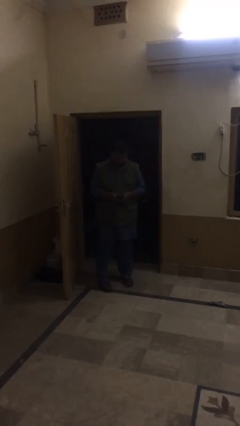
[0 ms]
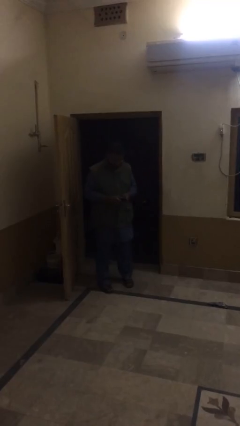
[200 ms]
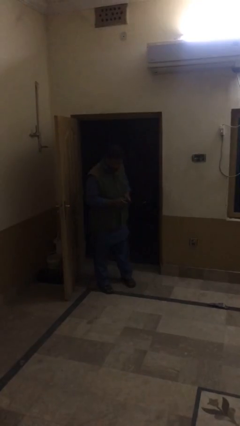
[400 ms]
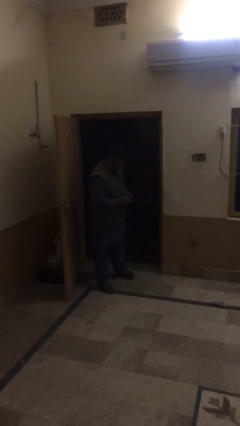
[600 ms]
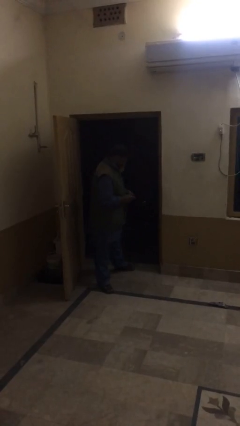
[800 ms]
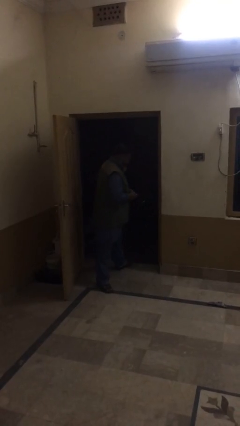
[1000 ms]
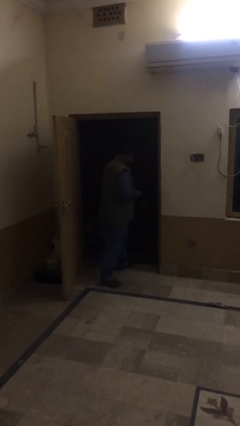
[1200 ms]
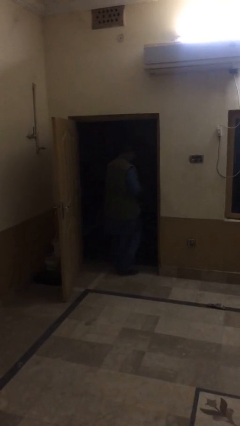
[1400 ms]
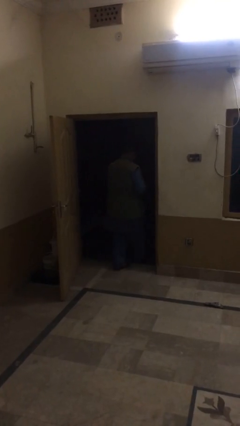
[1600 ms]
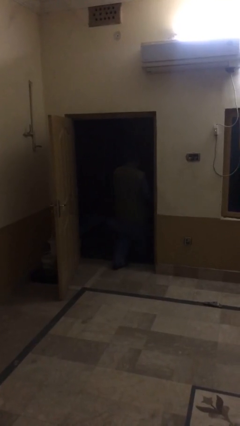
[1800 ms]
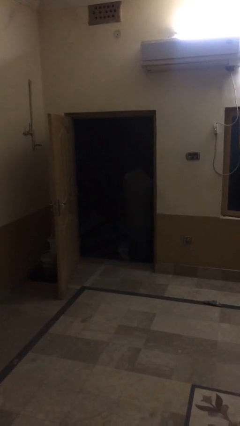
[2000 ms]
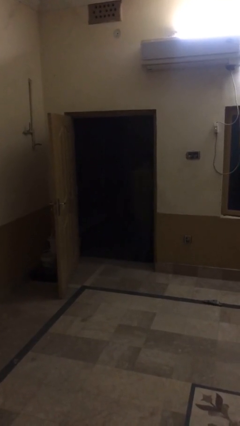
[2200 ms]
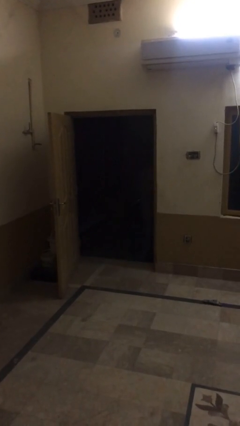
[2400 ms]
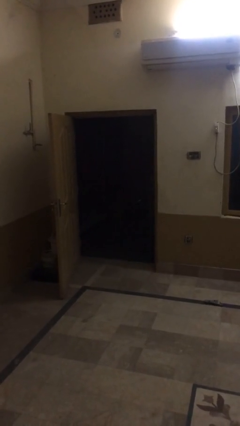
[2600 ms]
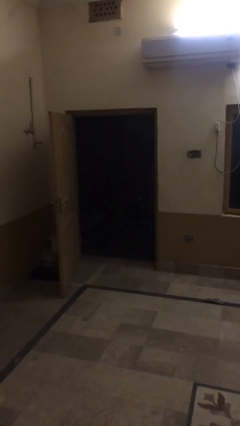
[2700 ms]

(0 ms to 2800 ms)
person exits scene through structure

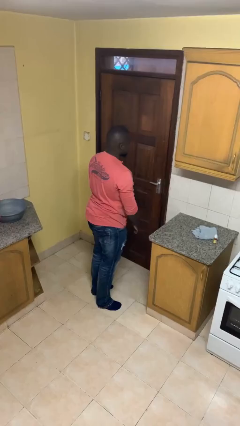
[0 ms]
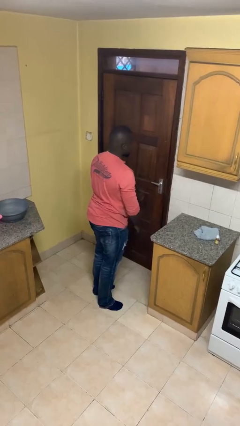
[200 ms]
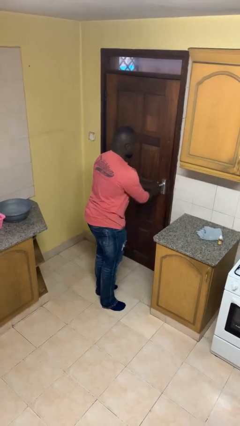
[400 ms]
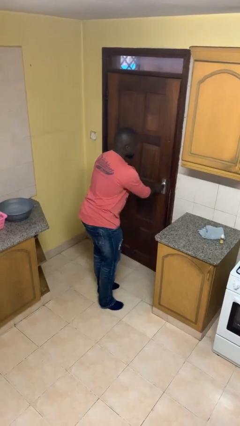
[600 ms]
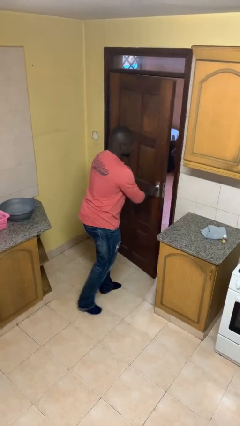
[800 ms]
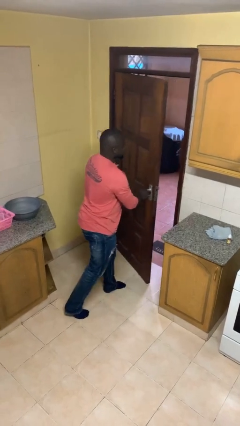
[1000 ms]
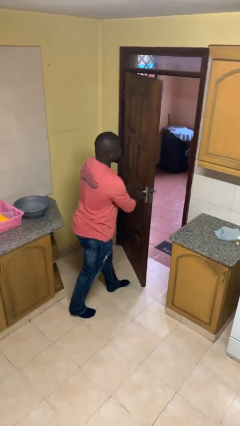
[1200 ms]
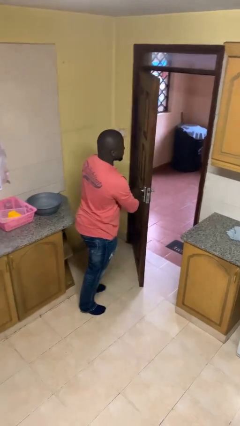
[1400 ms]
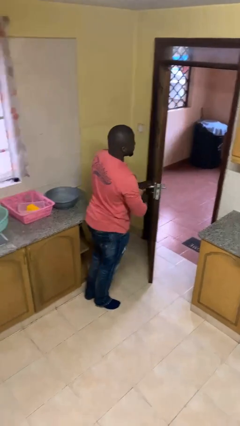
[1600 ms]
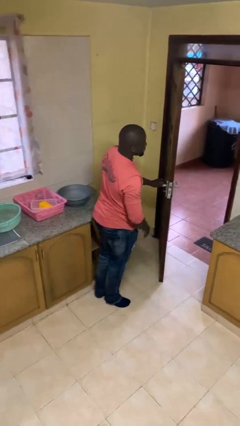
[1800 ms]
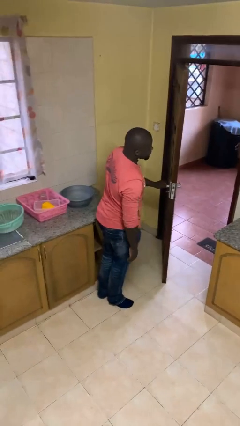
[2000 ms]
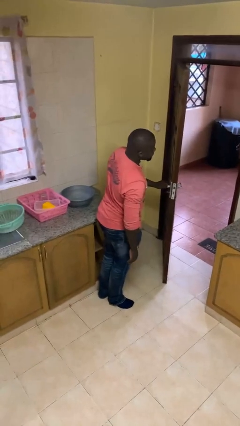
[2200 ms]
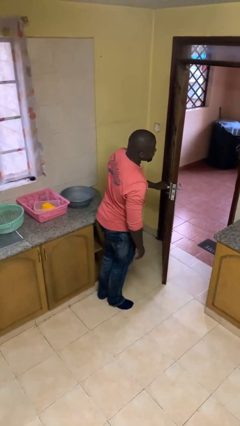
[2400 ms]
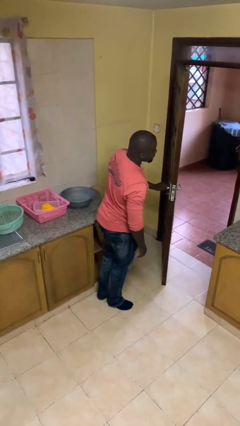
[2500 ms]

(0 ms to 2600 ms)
person opens facility door

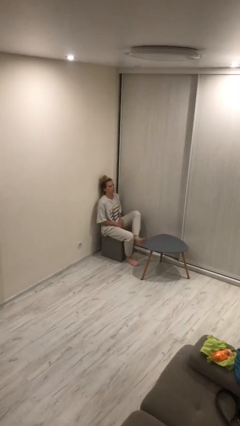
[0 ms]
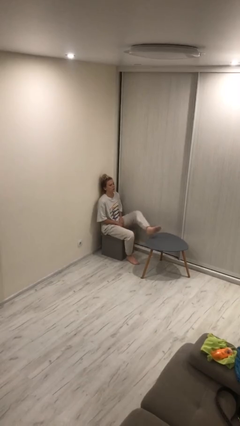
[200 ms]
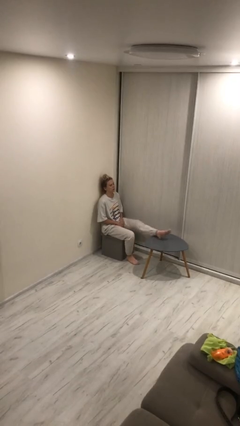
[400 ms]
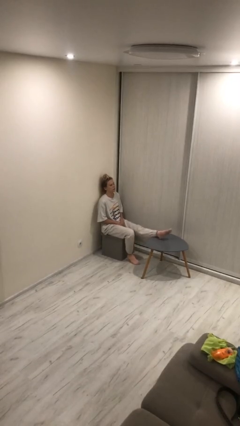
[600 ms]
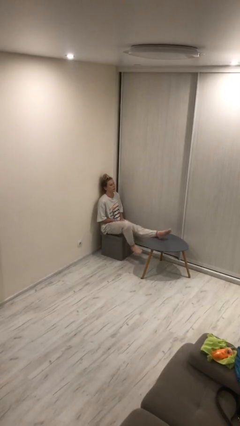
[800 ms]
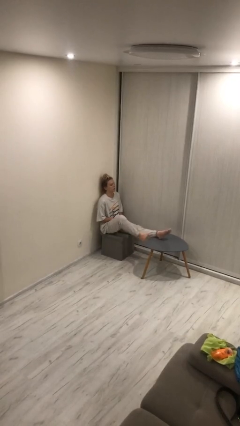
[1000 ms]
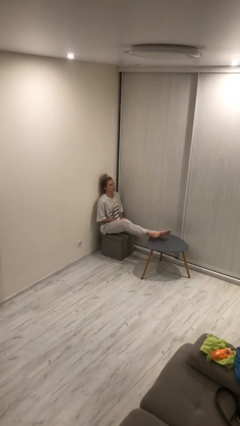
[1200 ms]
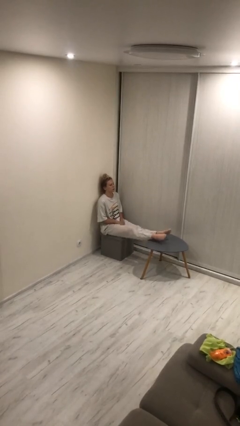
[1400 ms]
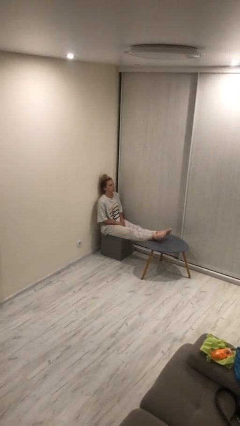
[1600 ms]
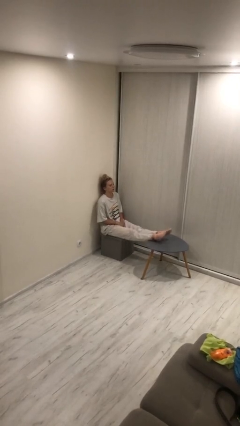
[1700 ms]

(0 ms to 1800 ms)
person puts feet up

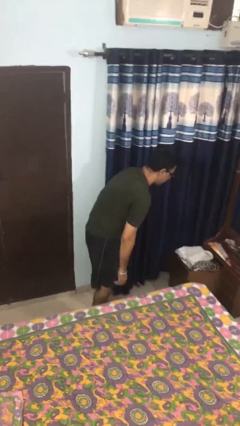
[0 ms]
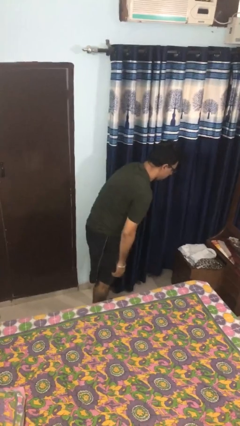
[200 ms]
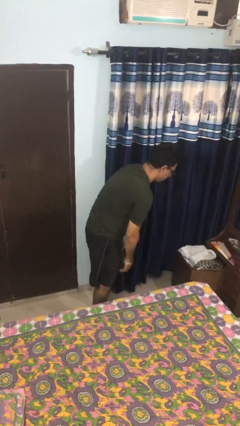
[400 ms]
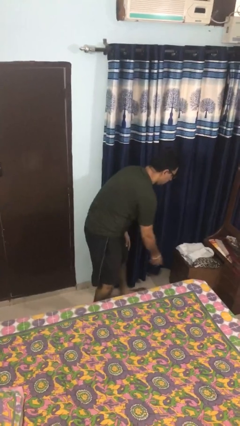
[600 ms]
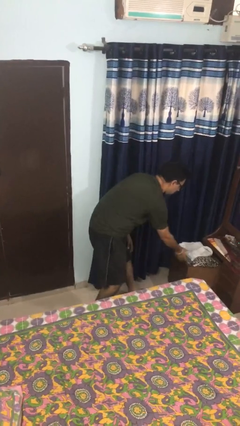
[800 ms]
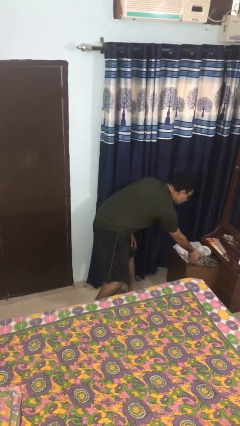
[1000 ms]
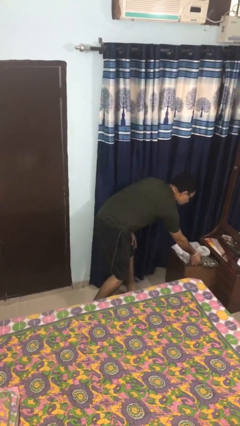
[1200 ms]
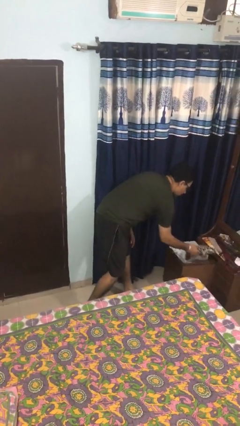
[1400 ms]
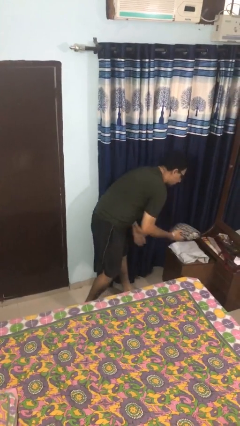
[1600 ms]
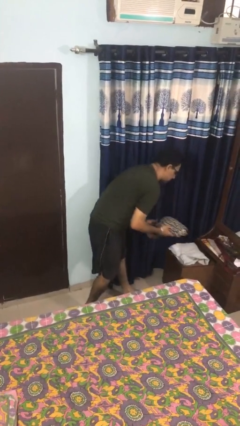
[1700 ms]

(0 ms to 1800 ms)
person takes clothes from dresser

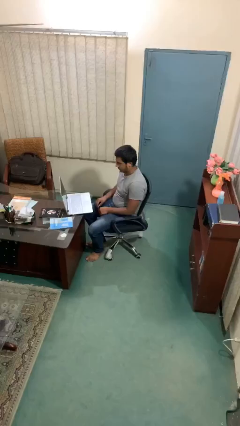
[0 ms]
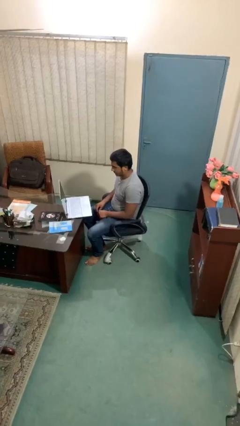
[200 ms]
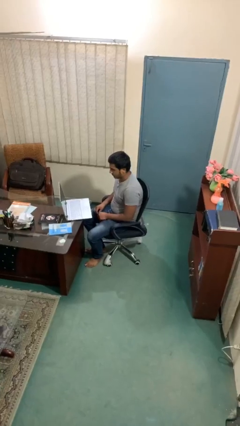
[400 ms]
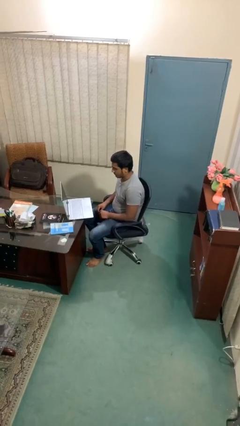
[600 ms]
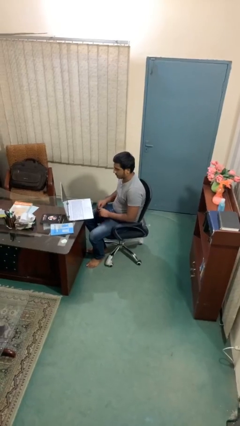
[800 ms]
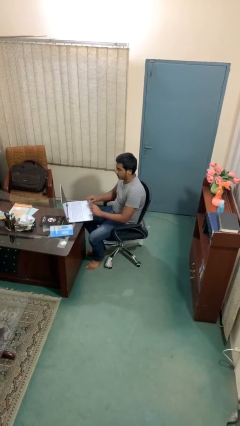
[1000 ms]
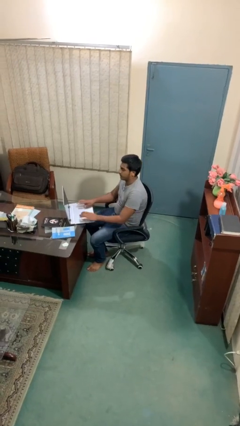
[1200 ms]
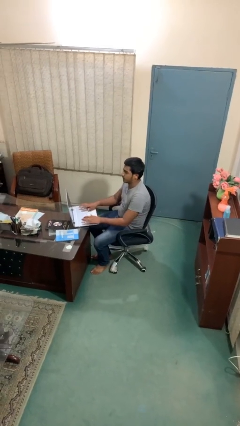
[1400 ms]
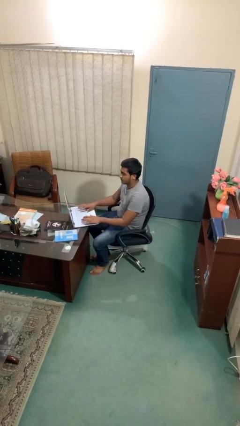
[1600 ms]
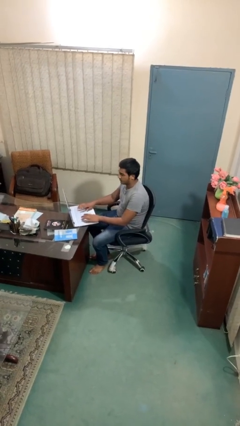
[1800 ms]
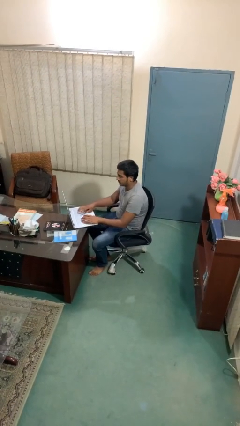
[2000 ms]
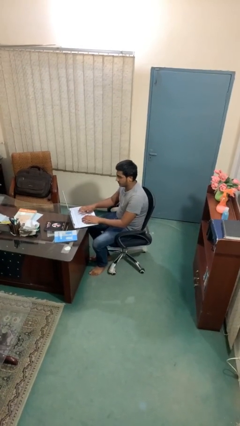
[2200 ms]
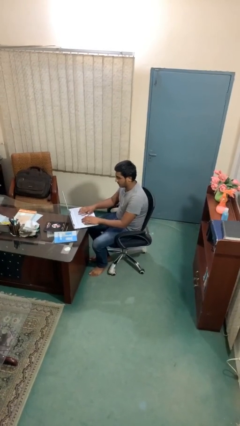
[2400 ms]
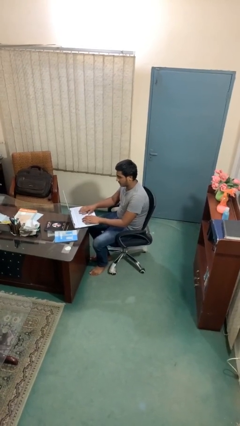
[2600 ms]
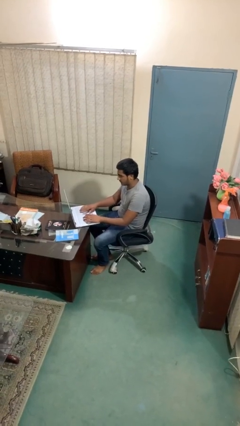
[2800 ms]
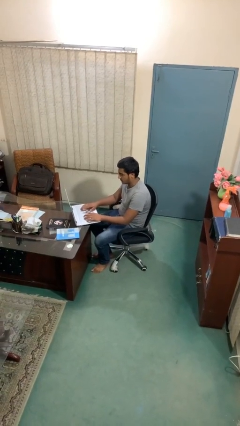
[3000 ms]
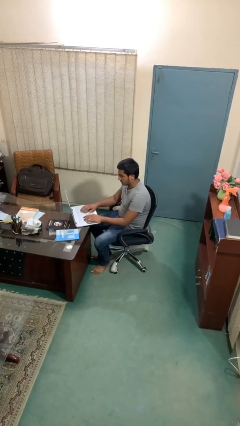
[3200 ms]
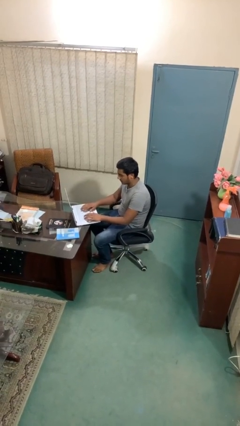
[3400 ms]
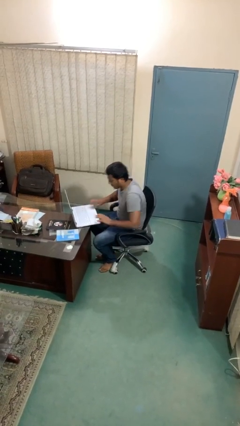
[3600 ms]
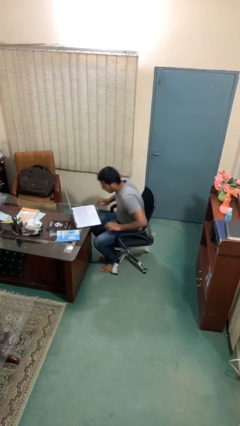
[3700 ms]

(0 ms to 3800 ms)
person interacts with laptop

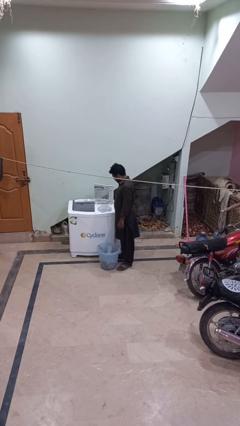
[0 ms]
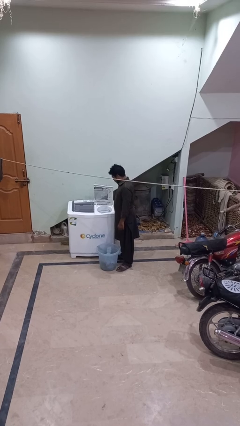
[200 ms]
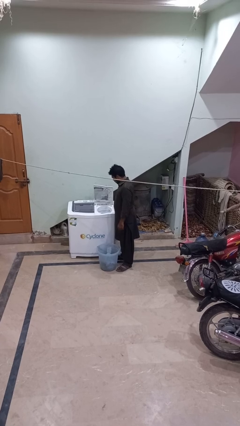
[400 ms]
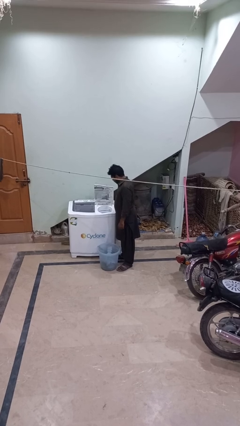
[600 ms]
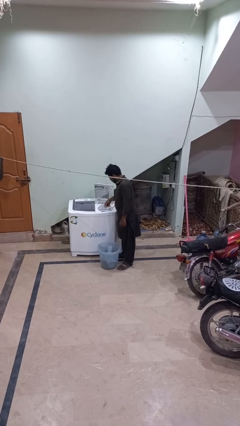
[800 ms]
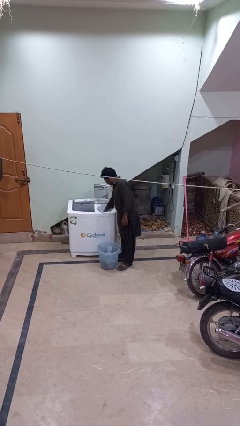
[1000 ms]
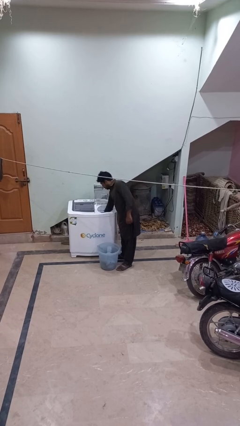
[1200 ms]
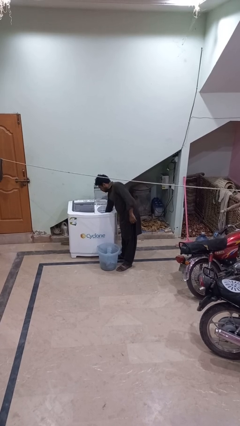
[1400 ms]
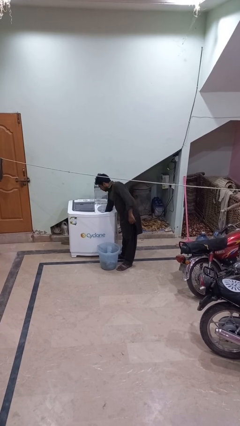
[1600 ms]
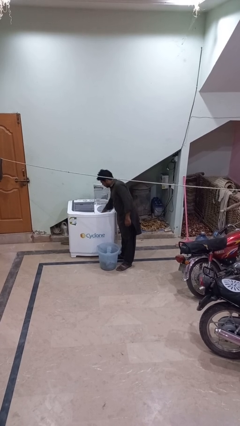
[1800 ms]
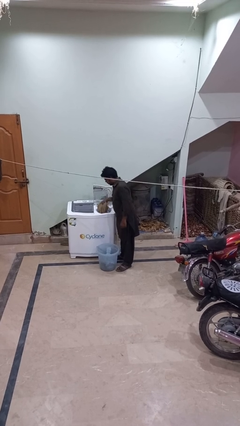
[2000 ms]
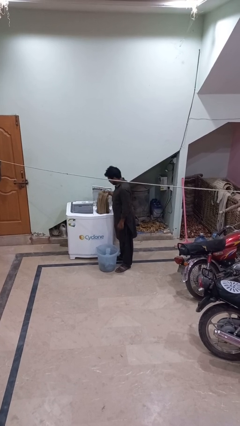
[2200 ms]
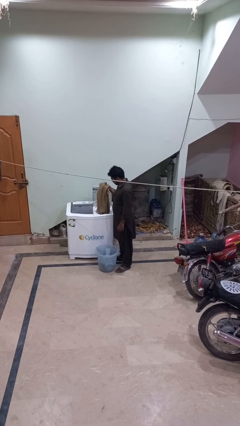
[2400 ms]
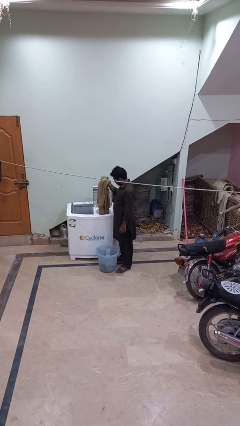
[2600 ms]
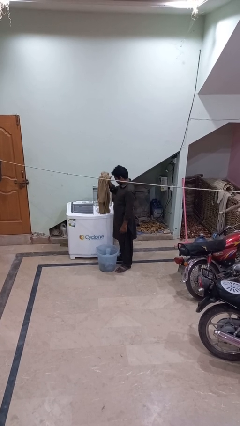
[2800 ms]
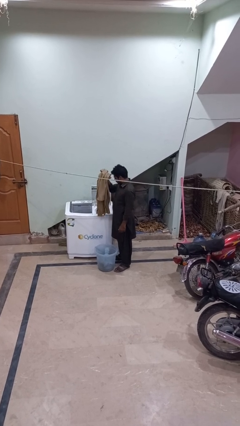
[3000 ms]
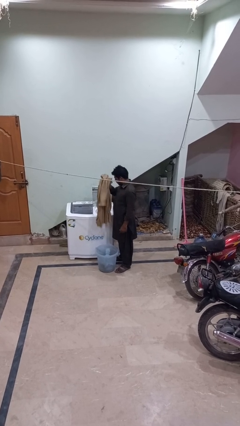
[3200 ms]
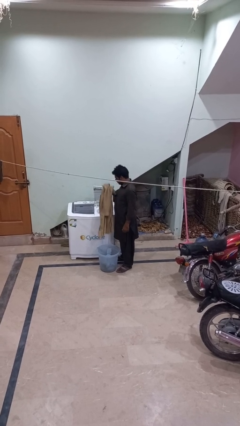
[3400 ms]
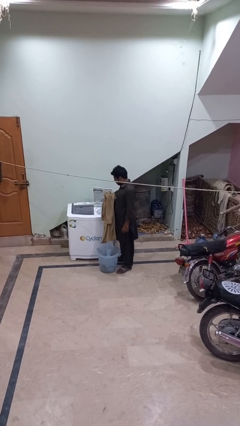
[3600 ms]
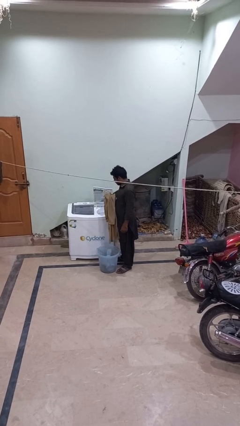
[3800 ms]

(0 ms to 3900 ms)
person unloads dryer
